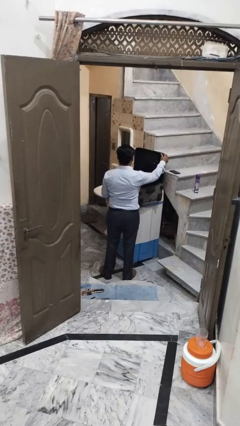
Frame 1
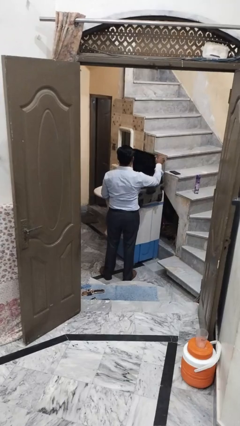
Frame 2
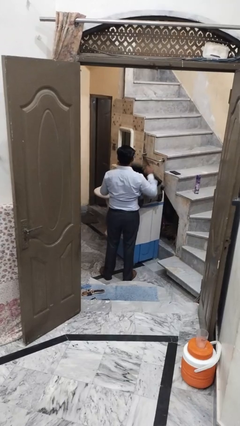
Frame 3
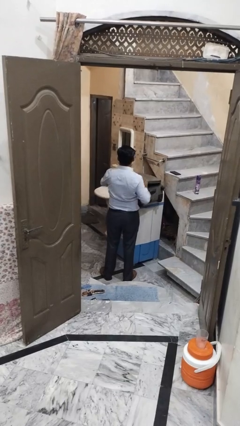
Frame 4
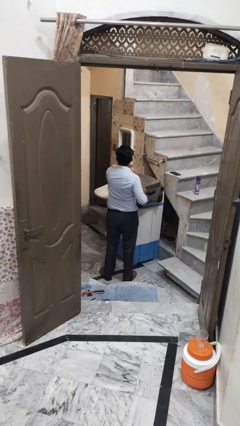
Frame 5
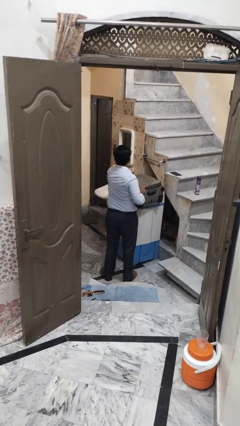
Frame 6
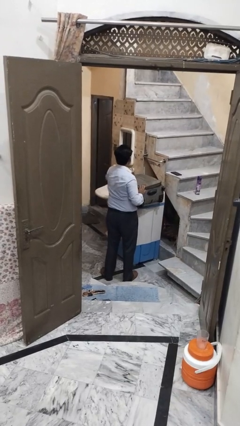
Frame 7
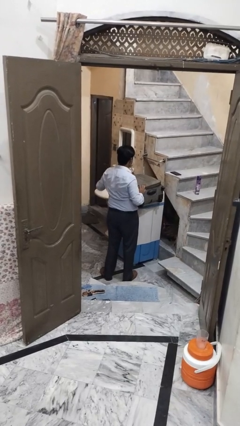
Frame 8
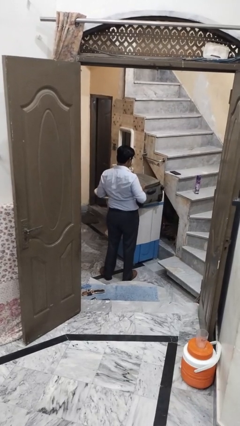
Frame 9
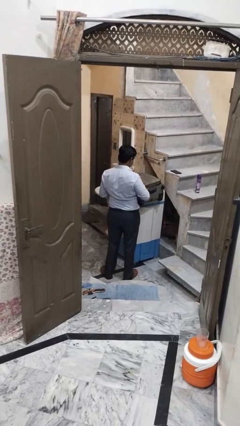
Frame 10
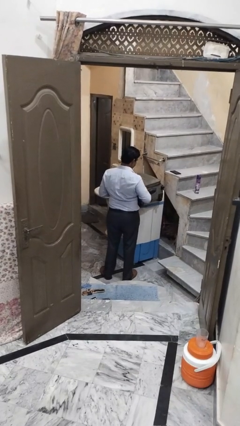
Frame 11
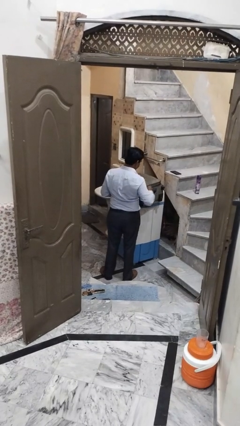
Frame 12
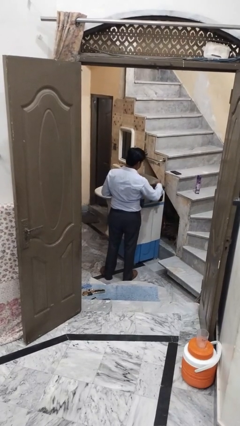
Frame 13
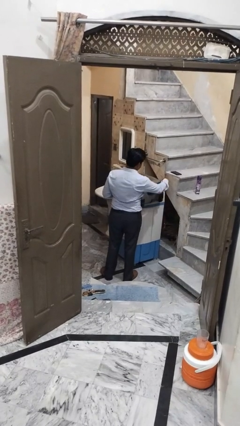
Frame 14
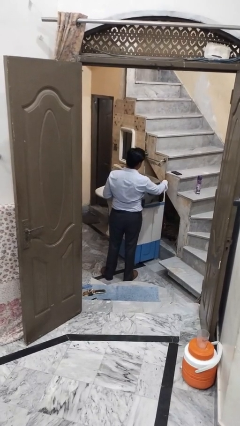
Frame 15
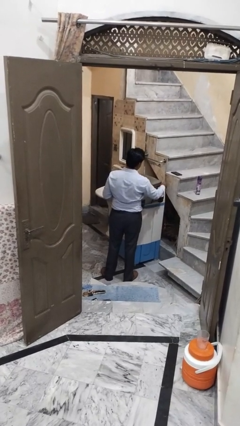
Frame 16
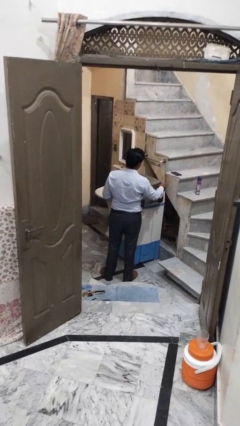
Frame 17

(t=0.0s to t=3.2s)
person closes suitcase

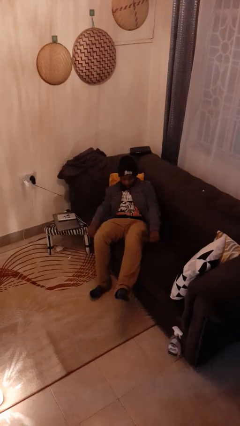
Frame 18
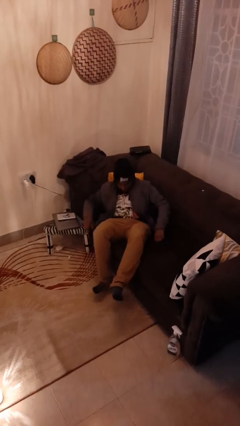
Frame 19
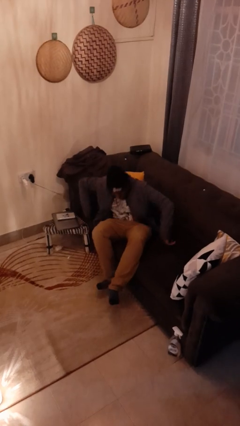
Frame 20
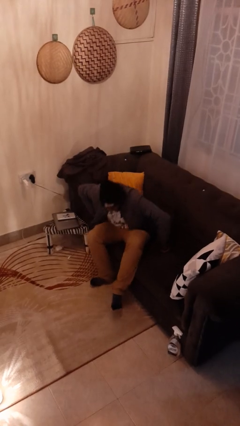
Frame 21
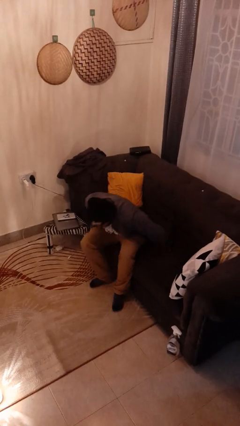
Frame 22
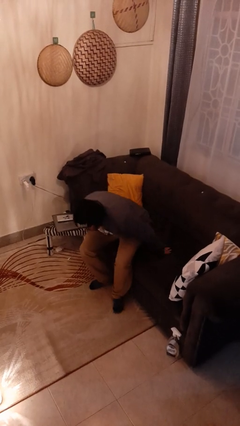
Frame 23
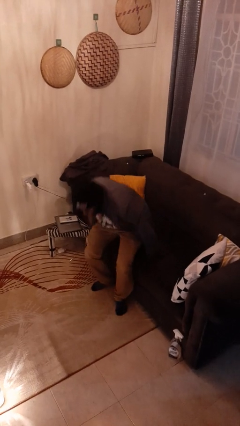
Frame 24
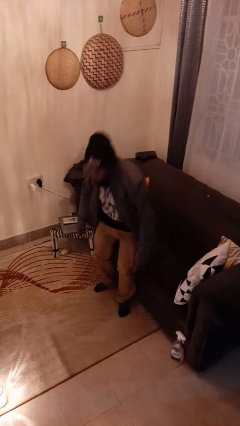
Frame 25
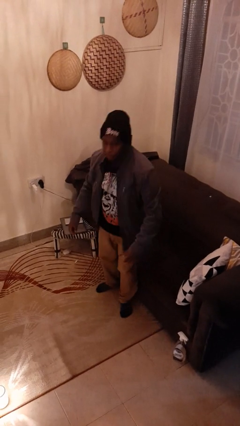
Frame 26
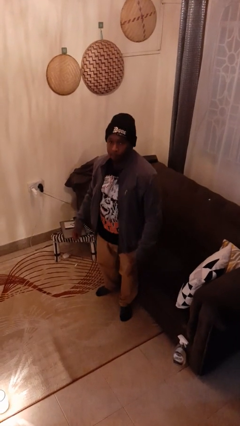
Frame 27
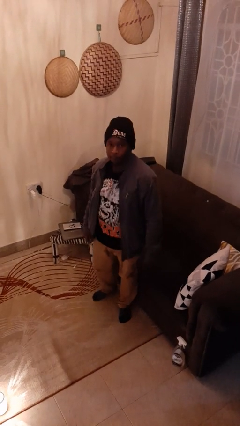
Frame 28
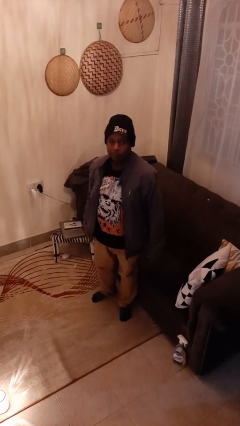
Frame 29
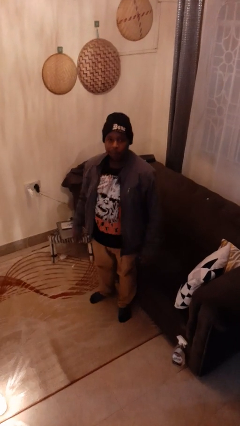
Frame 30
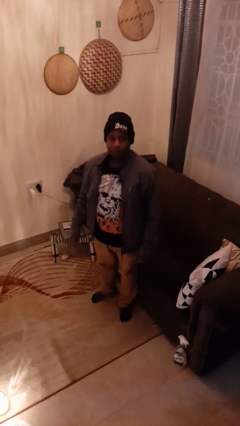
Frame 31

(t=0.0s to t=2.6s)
person stands up

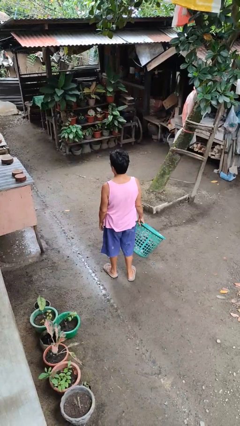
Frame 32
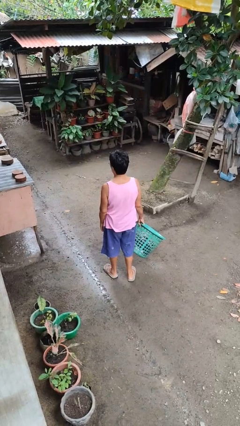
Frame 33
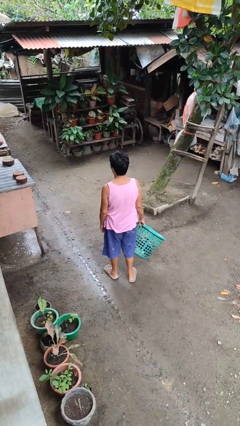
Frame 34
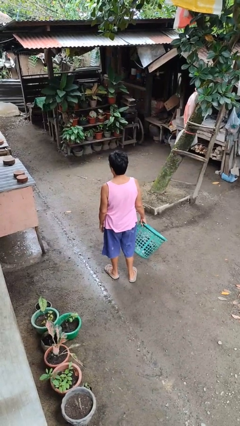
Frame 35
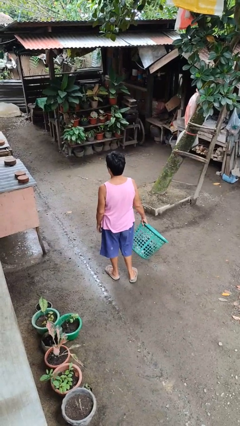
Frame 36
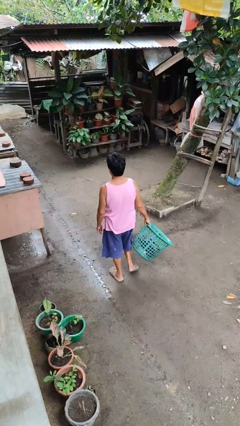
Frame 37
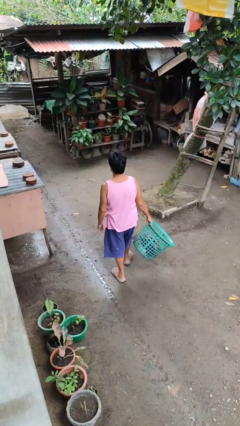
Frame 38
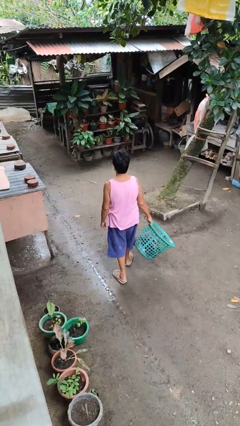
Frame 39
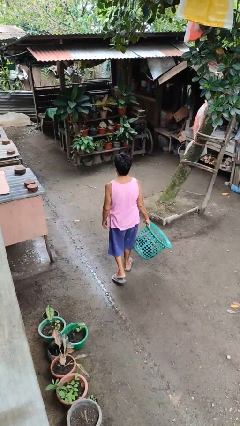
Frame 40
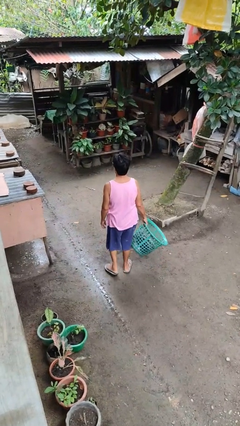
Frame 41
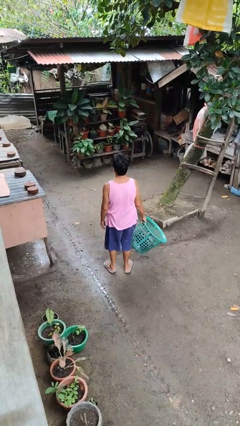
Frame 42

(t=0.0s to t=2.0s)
person carries laundry basket

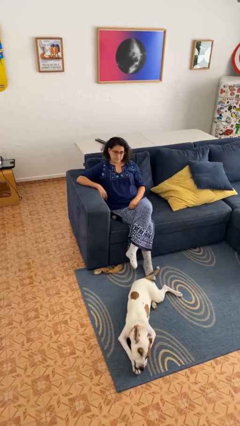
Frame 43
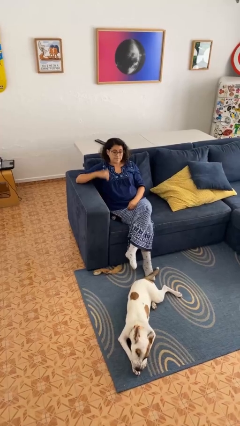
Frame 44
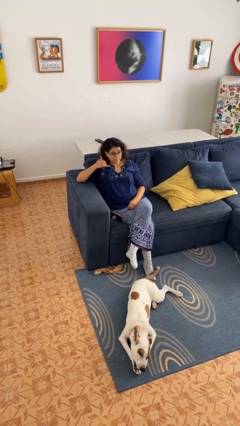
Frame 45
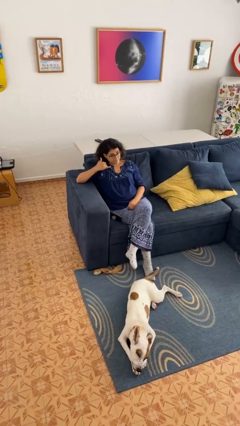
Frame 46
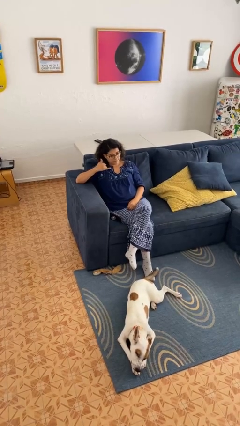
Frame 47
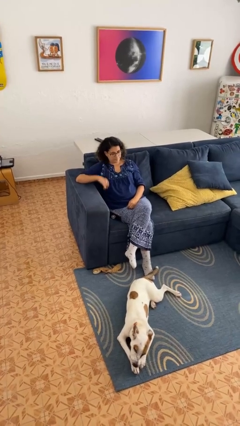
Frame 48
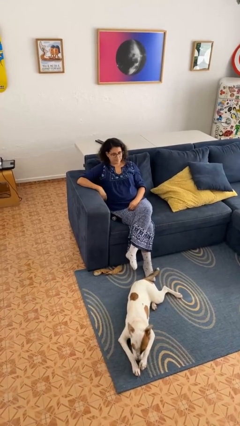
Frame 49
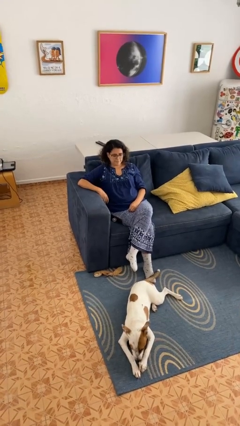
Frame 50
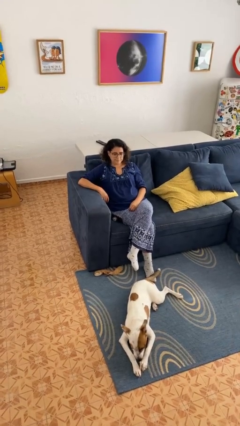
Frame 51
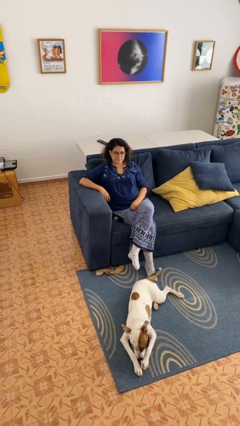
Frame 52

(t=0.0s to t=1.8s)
person gestures call me

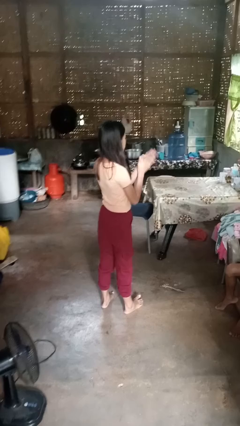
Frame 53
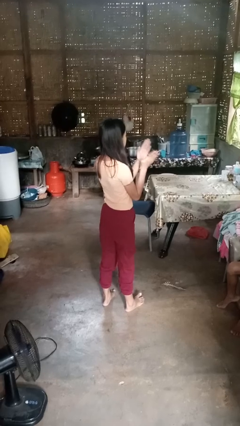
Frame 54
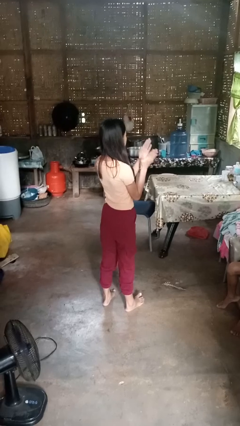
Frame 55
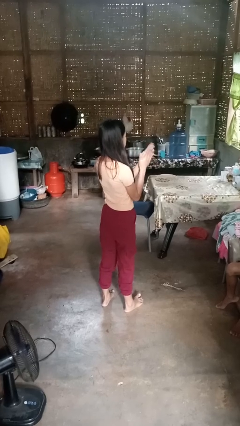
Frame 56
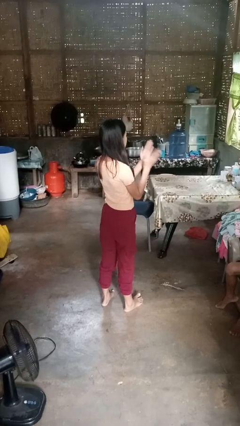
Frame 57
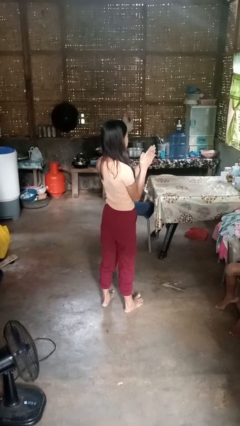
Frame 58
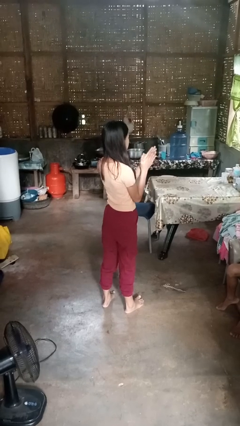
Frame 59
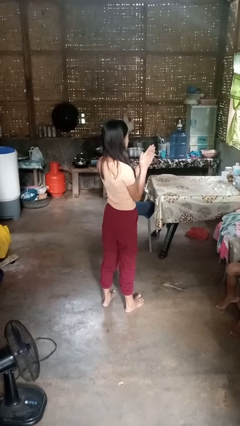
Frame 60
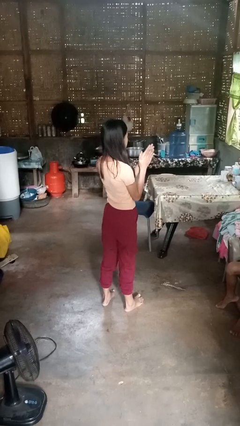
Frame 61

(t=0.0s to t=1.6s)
person claps hands

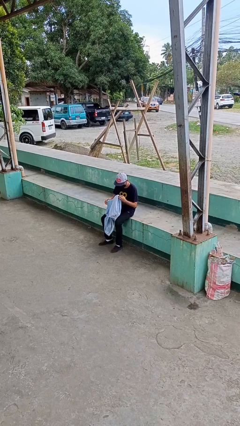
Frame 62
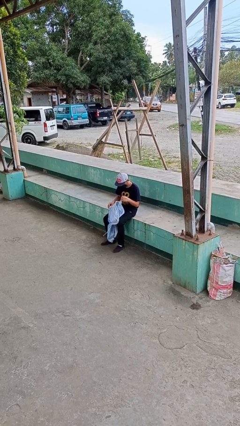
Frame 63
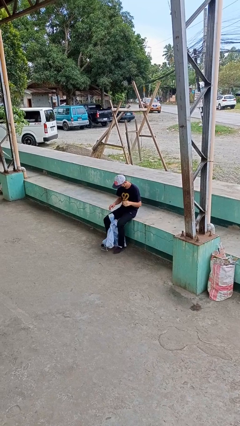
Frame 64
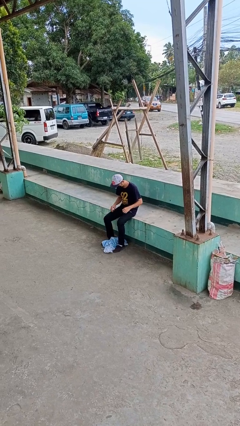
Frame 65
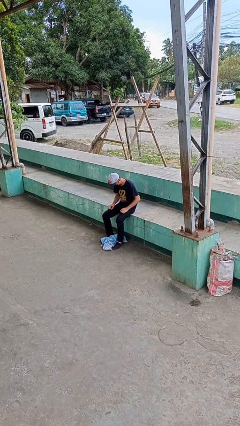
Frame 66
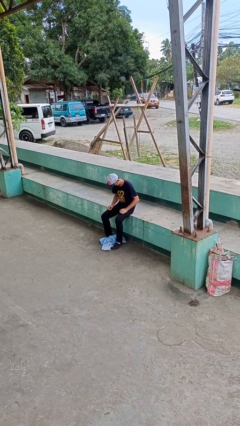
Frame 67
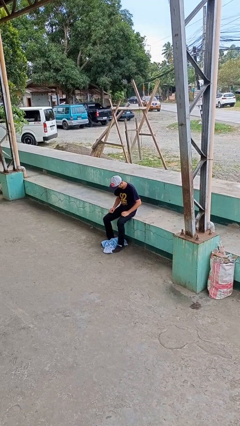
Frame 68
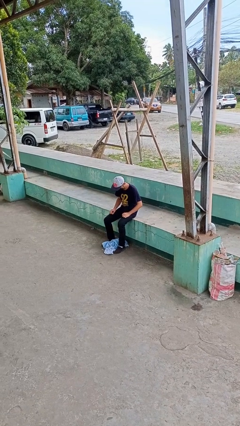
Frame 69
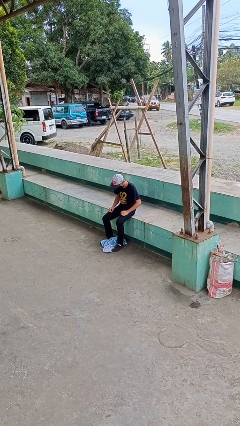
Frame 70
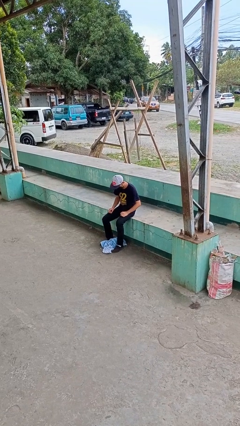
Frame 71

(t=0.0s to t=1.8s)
person drops object

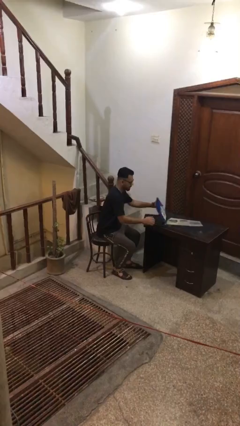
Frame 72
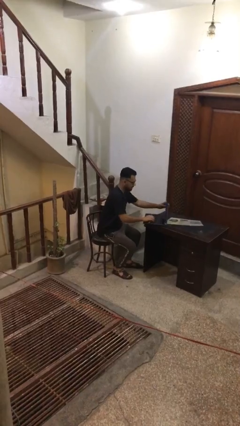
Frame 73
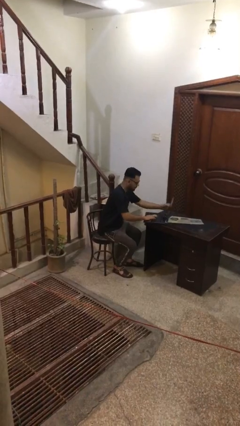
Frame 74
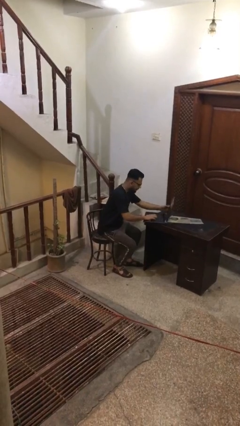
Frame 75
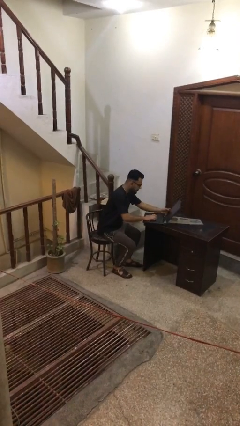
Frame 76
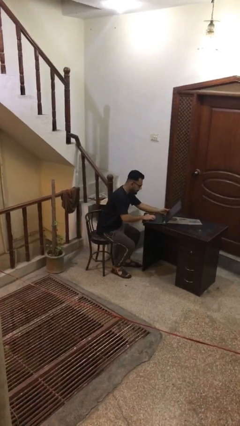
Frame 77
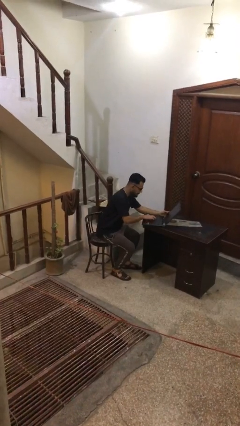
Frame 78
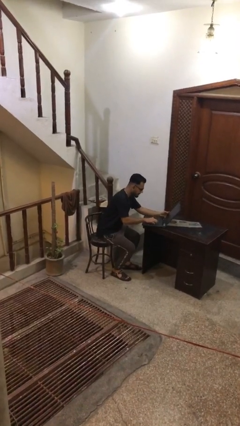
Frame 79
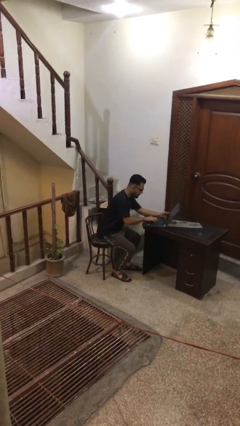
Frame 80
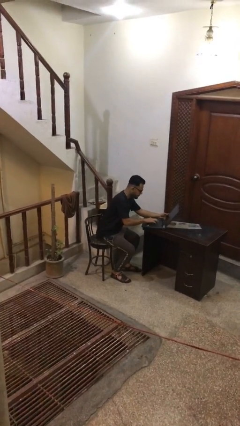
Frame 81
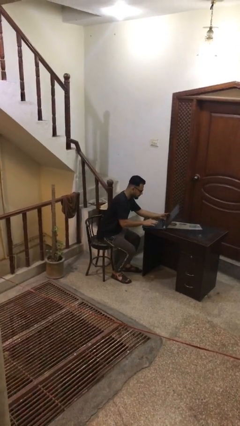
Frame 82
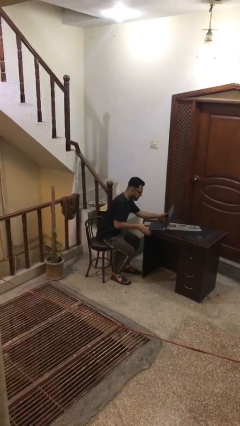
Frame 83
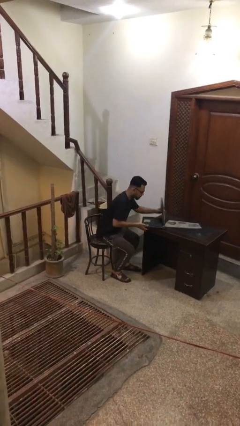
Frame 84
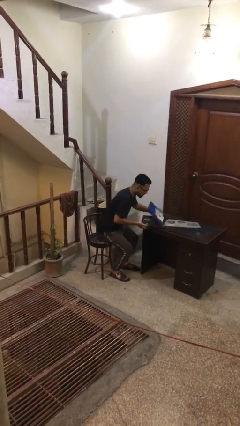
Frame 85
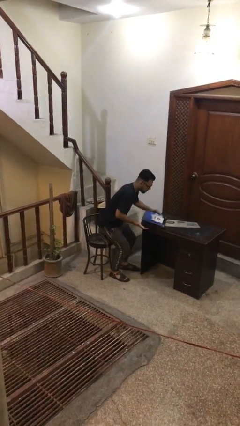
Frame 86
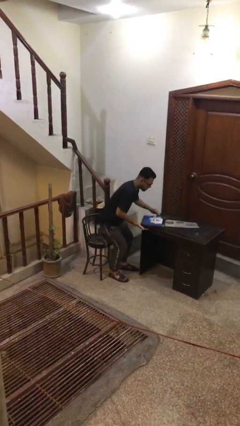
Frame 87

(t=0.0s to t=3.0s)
person interacts with laptop

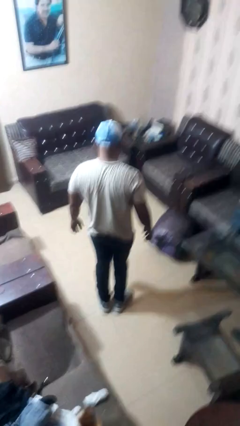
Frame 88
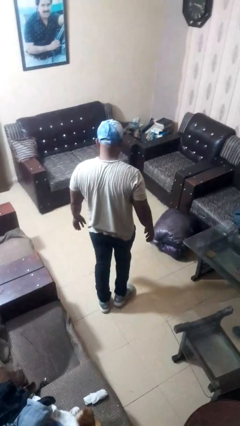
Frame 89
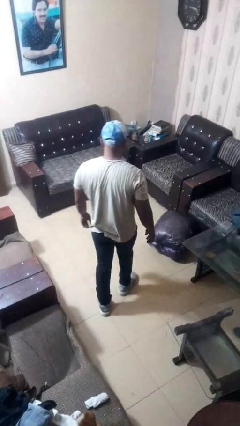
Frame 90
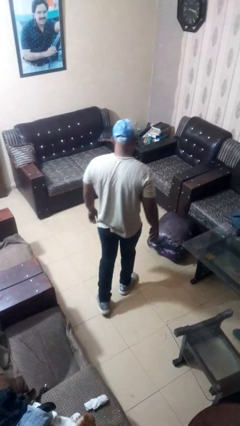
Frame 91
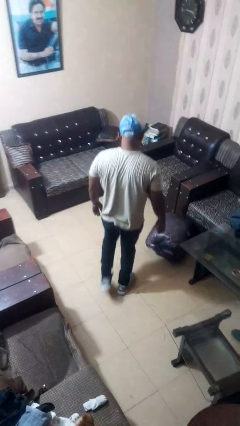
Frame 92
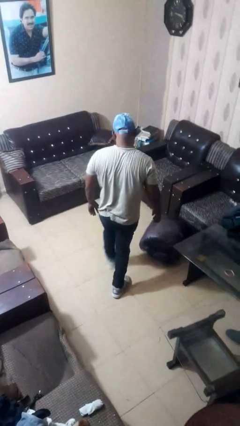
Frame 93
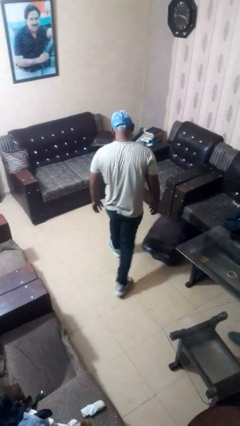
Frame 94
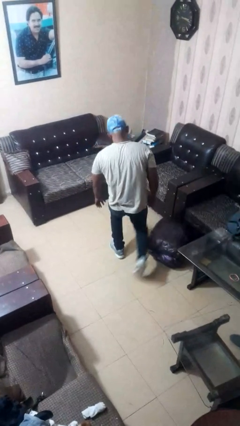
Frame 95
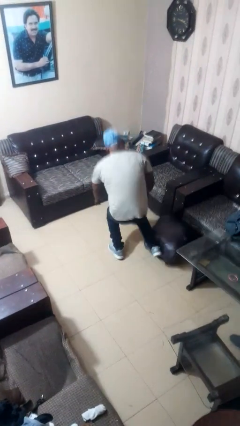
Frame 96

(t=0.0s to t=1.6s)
person trips on object on floor
